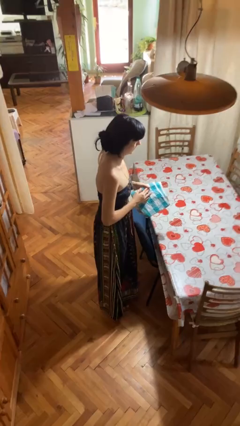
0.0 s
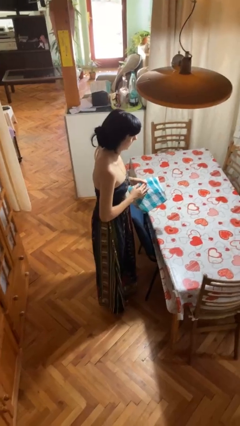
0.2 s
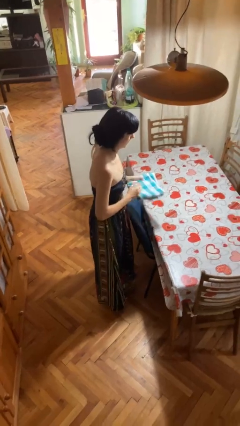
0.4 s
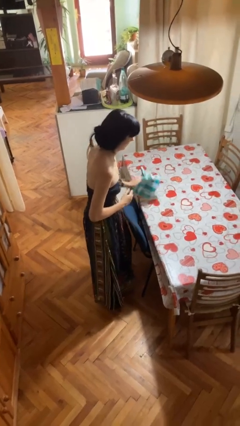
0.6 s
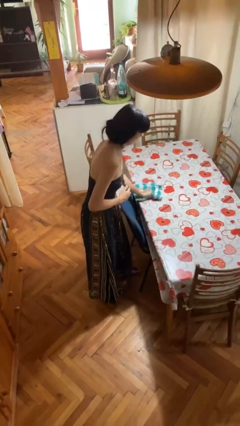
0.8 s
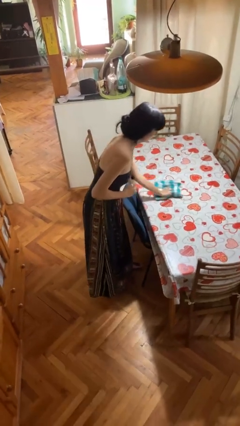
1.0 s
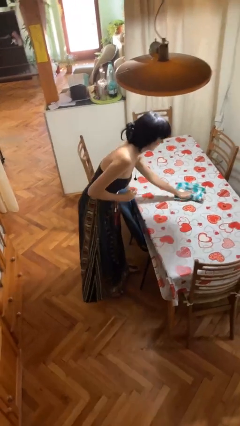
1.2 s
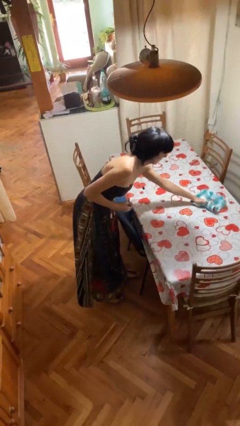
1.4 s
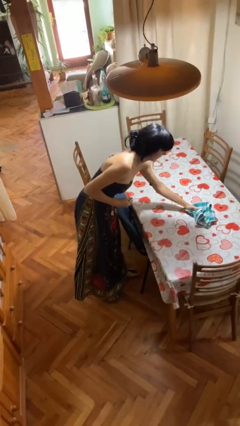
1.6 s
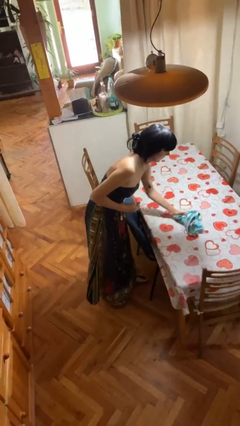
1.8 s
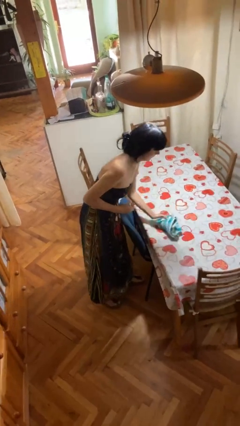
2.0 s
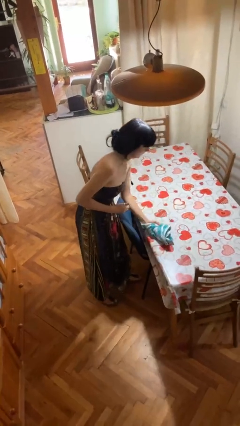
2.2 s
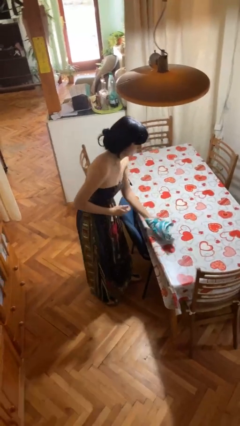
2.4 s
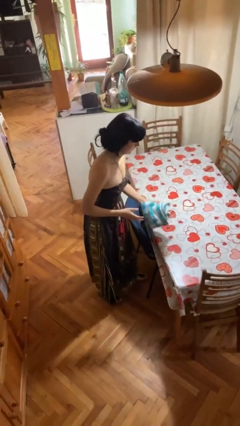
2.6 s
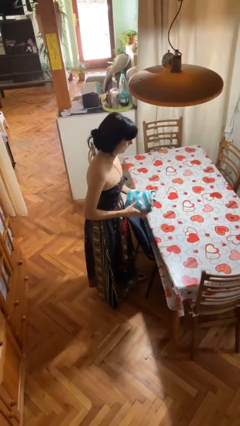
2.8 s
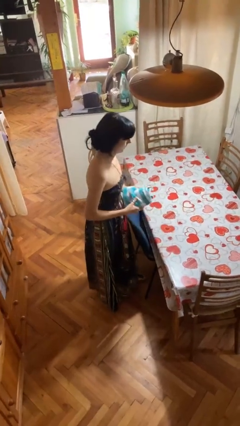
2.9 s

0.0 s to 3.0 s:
person cleans table with rag

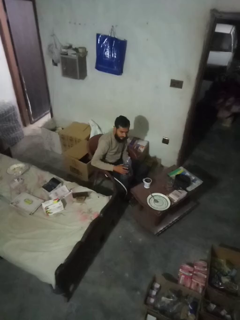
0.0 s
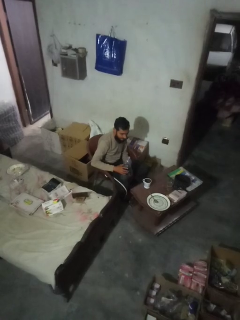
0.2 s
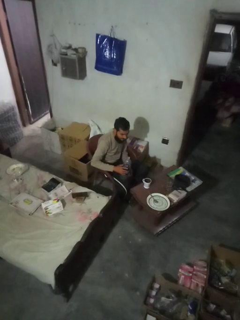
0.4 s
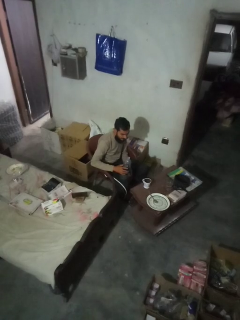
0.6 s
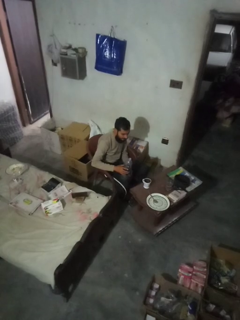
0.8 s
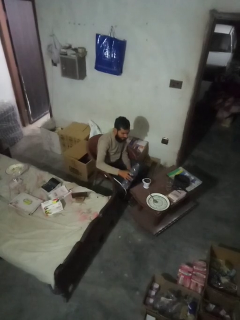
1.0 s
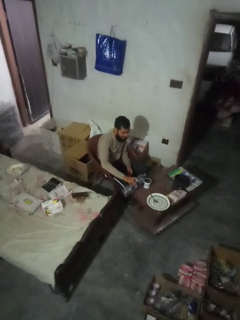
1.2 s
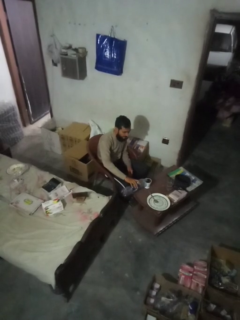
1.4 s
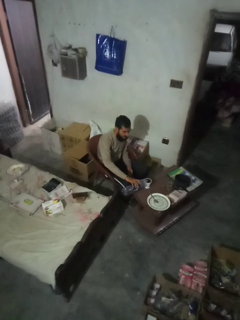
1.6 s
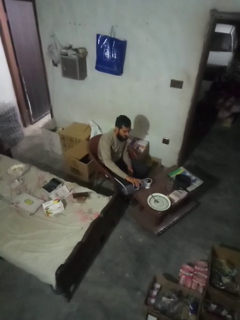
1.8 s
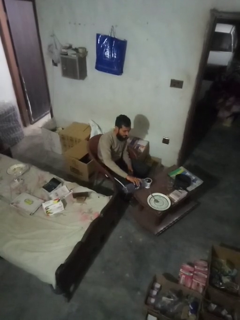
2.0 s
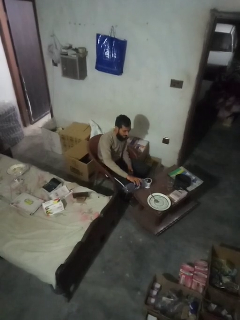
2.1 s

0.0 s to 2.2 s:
person pours liquid into cup

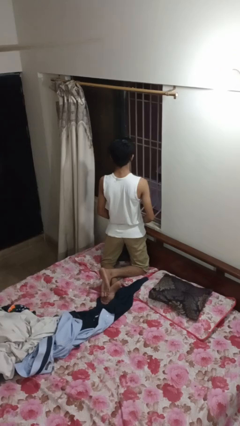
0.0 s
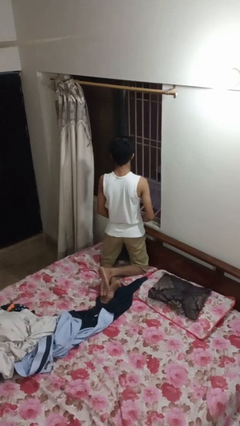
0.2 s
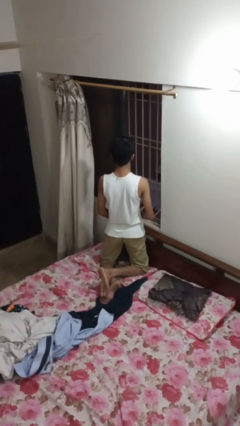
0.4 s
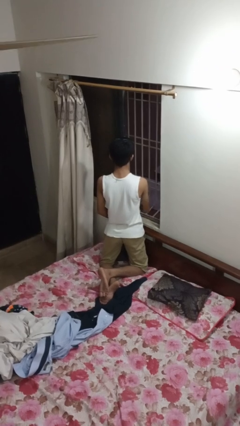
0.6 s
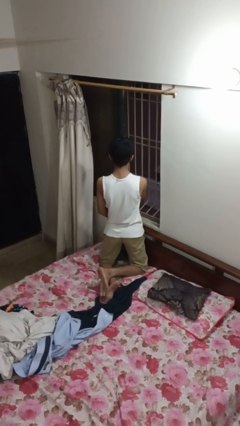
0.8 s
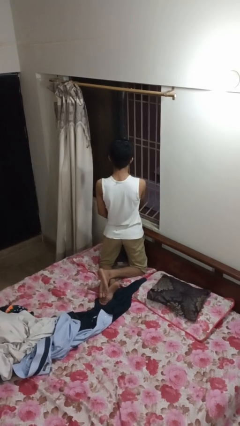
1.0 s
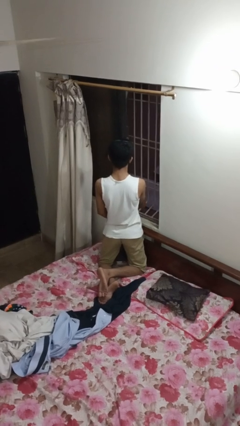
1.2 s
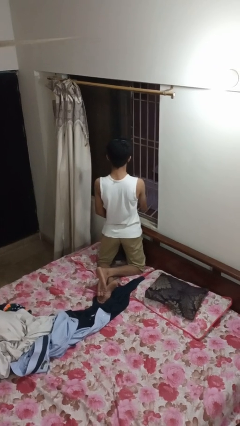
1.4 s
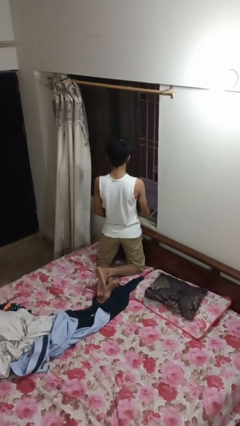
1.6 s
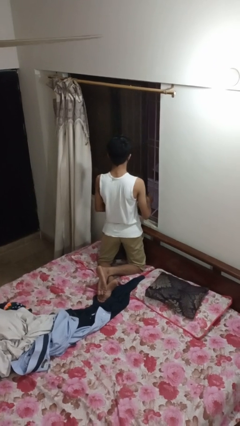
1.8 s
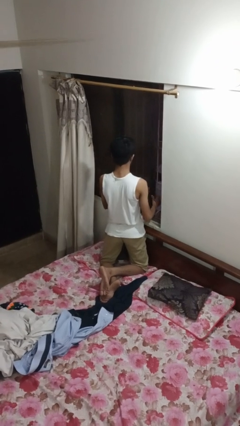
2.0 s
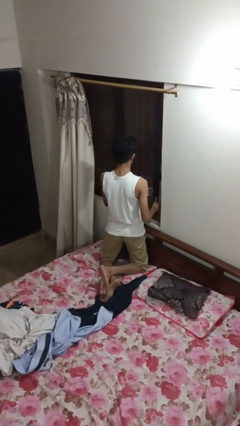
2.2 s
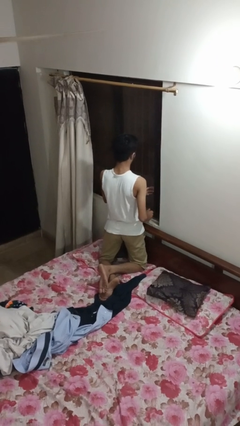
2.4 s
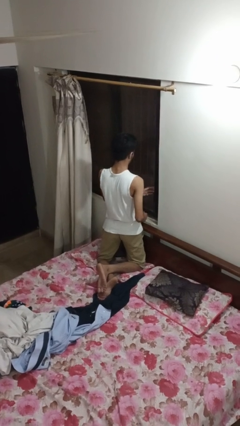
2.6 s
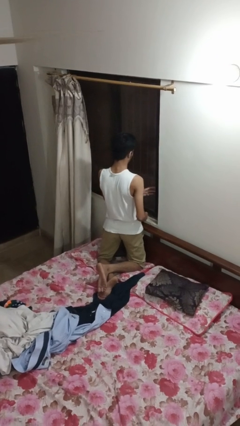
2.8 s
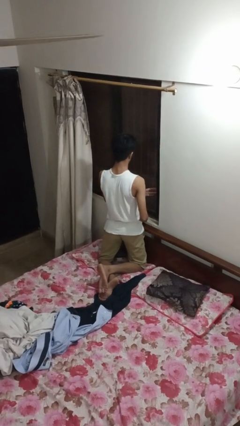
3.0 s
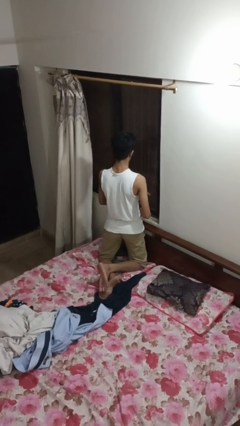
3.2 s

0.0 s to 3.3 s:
person closes home window

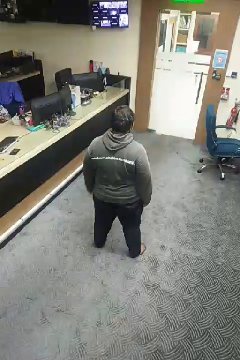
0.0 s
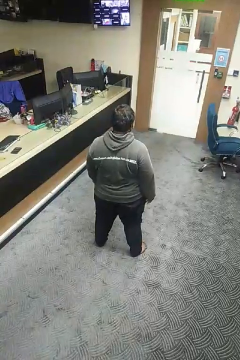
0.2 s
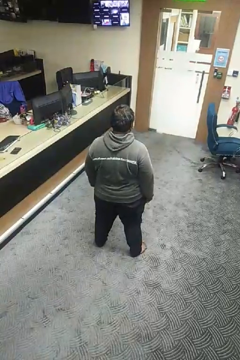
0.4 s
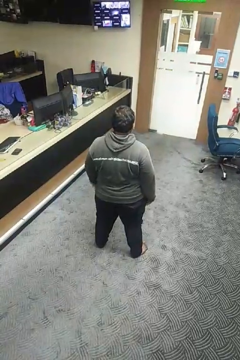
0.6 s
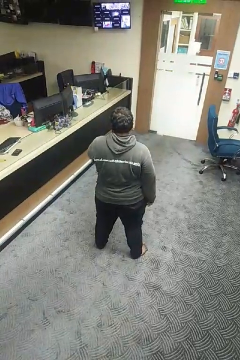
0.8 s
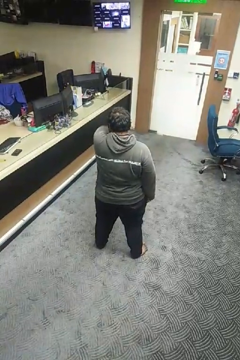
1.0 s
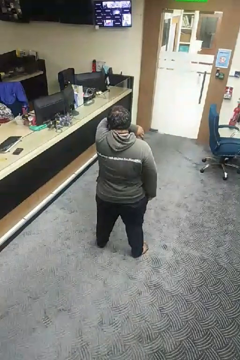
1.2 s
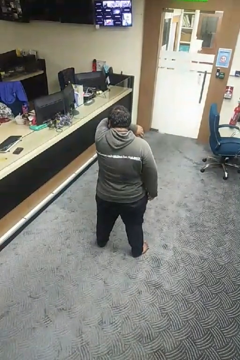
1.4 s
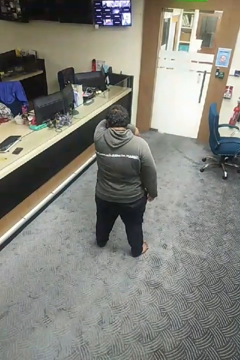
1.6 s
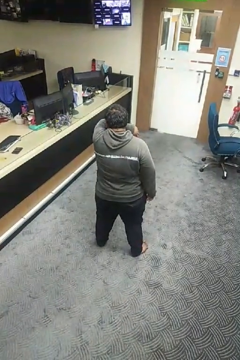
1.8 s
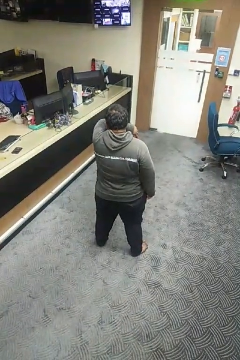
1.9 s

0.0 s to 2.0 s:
person sneezes into arm

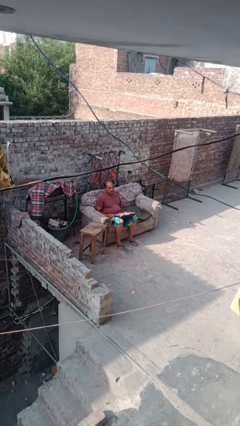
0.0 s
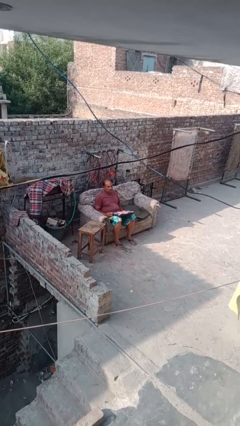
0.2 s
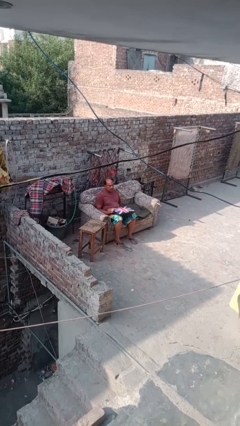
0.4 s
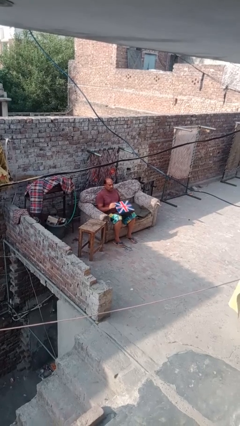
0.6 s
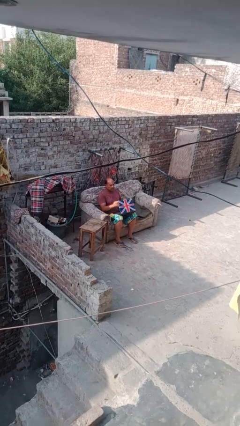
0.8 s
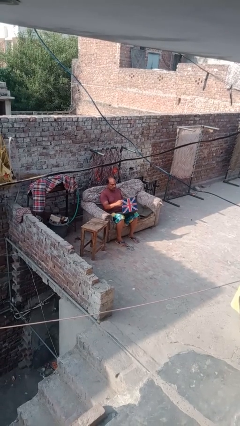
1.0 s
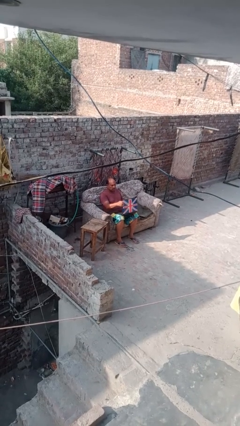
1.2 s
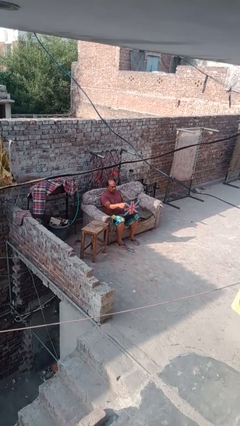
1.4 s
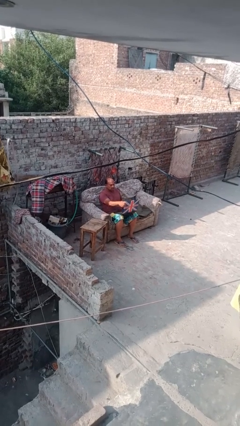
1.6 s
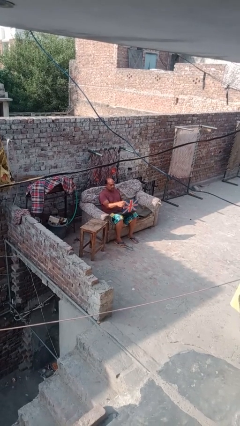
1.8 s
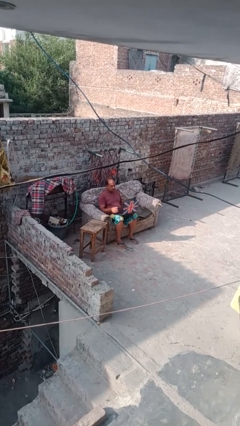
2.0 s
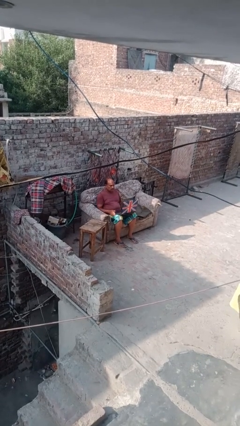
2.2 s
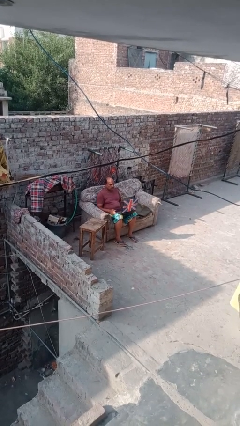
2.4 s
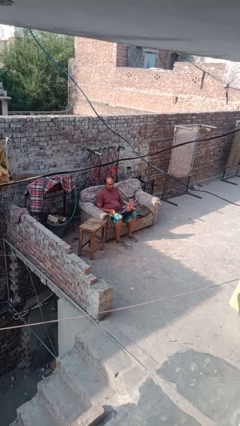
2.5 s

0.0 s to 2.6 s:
person opens laptop

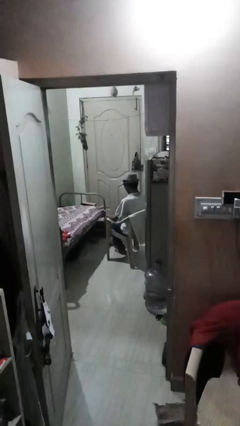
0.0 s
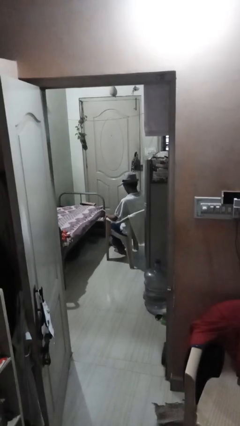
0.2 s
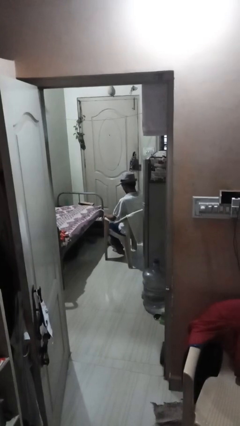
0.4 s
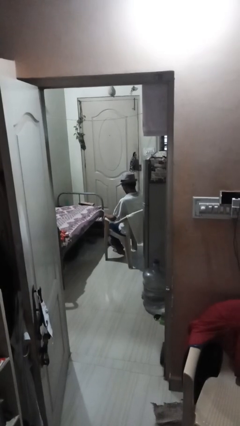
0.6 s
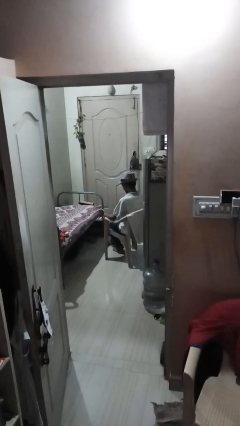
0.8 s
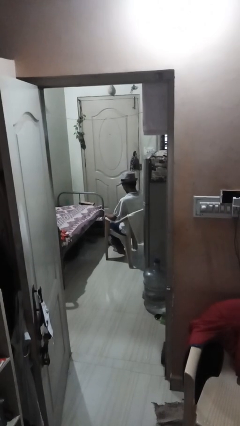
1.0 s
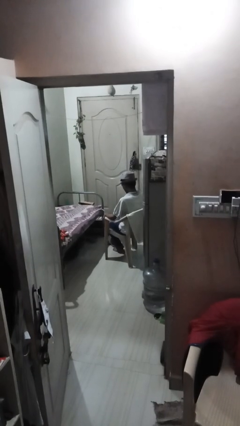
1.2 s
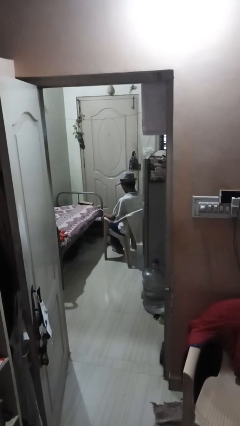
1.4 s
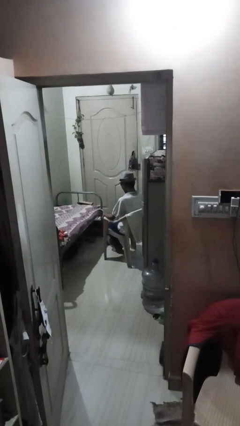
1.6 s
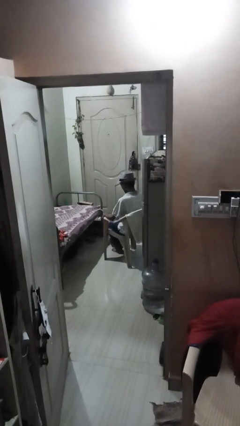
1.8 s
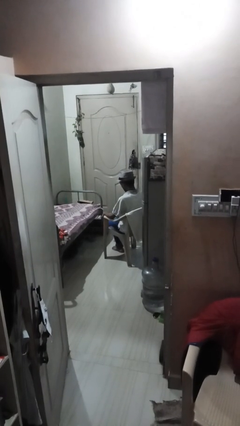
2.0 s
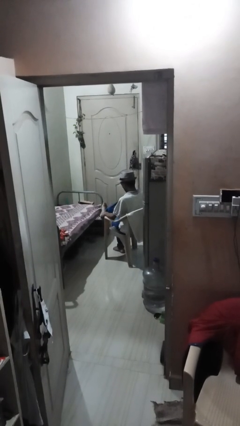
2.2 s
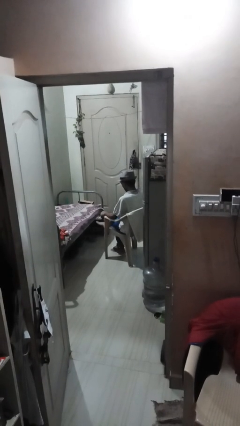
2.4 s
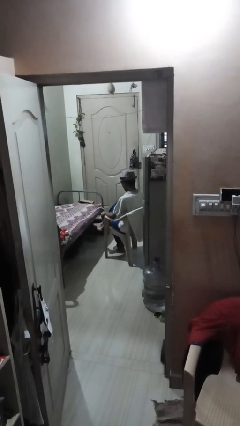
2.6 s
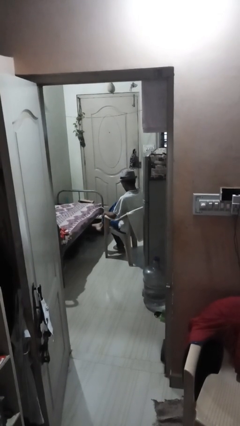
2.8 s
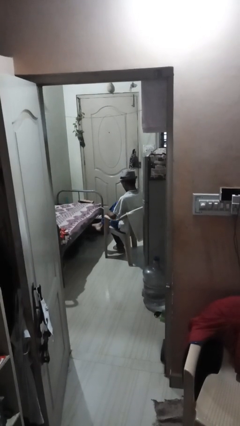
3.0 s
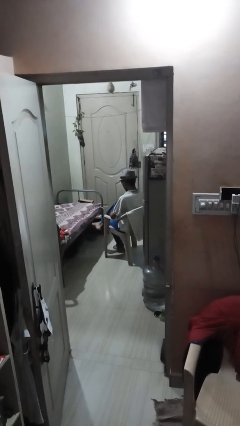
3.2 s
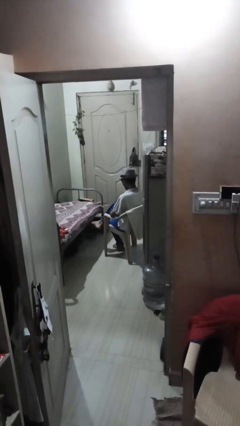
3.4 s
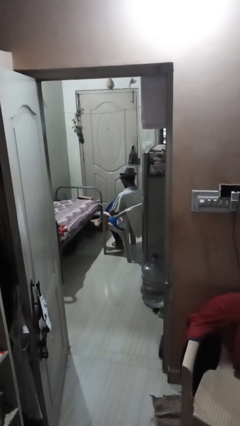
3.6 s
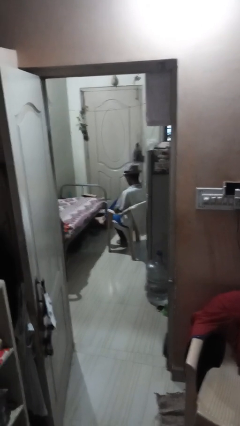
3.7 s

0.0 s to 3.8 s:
person crosses legs

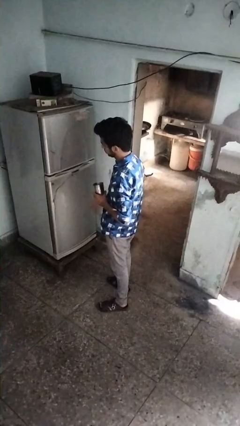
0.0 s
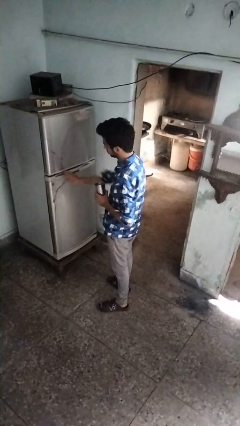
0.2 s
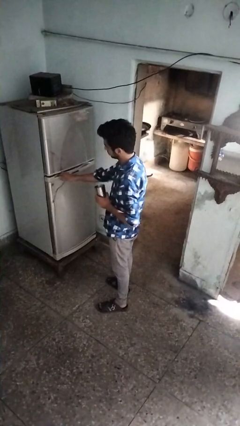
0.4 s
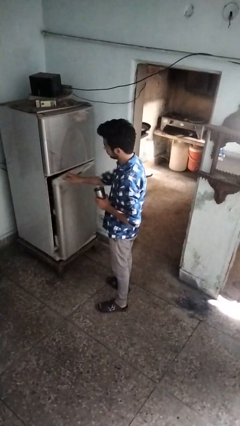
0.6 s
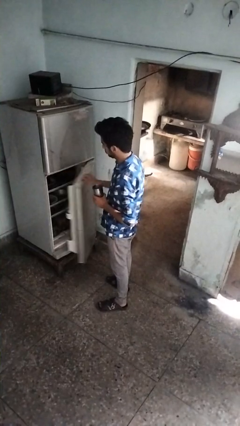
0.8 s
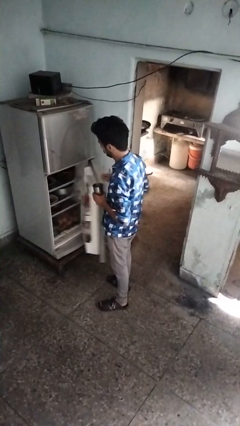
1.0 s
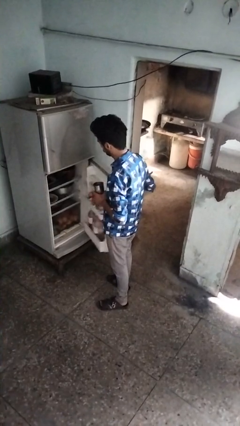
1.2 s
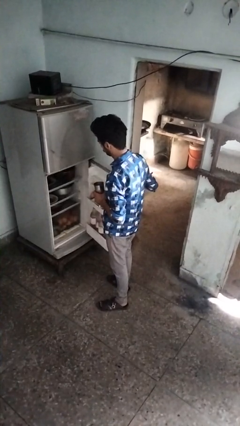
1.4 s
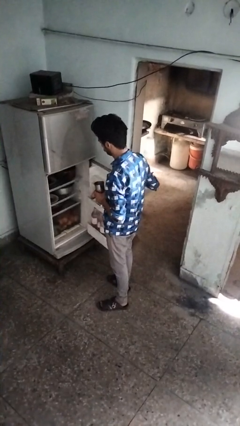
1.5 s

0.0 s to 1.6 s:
person opens refrigerator
